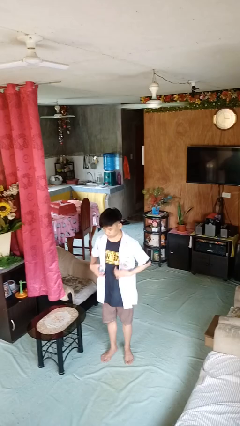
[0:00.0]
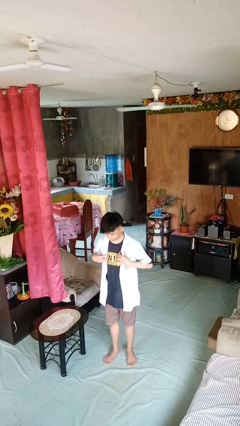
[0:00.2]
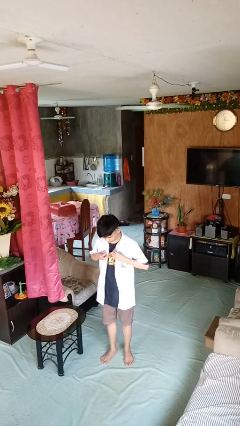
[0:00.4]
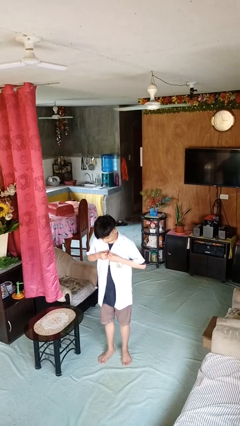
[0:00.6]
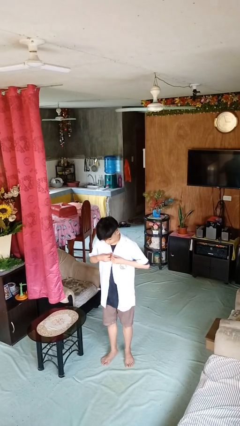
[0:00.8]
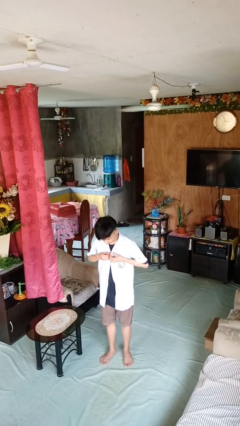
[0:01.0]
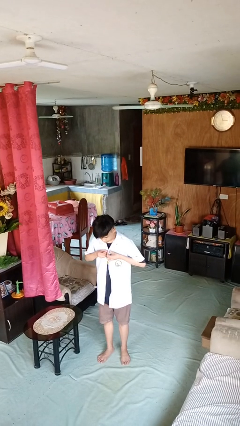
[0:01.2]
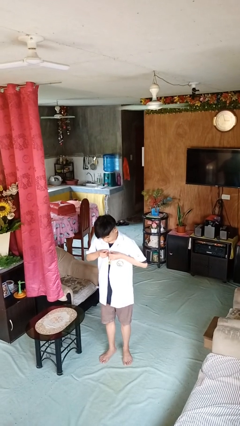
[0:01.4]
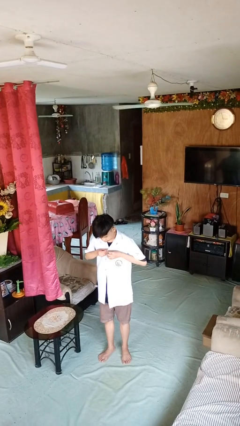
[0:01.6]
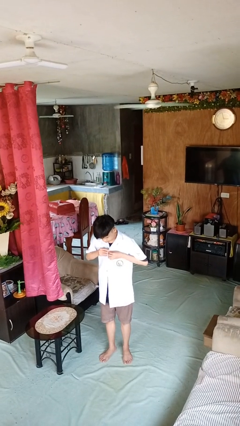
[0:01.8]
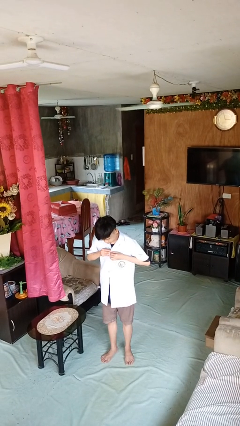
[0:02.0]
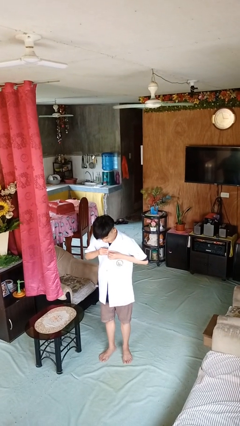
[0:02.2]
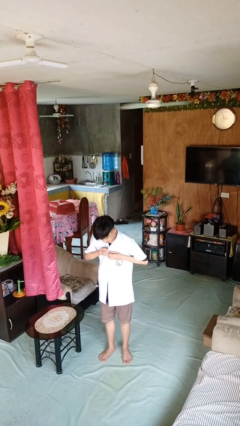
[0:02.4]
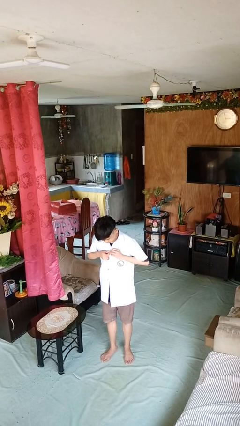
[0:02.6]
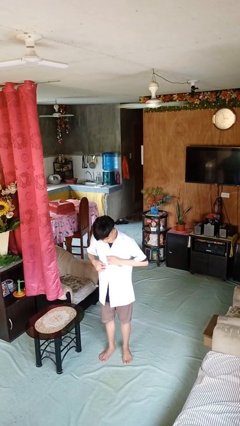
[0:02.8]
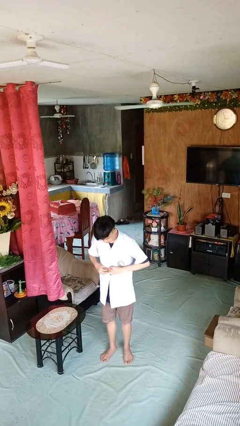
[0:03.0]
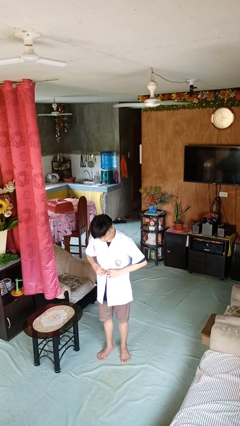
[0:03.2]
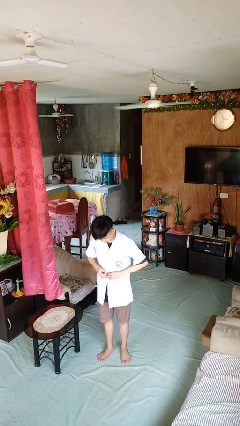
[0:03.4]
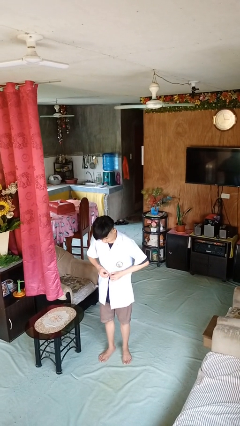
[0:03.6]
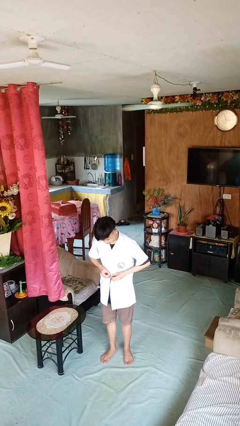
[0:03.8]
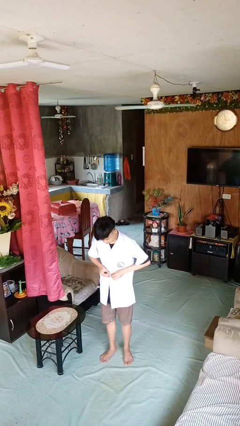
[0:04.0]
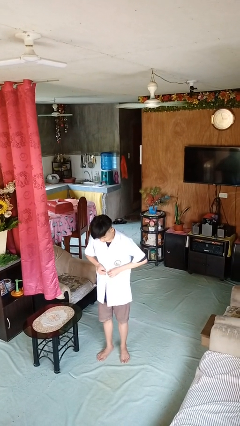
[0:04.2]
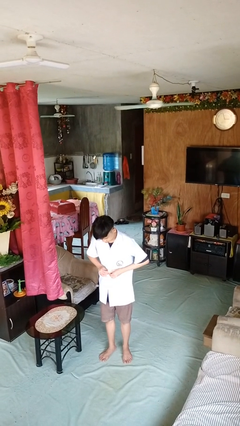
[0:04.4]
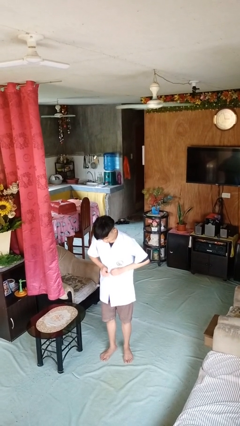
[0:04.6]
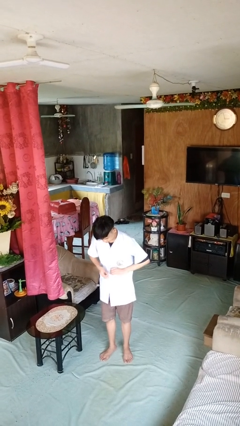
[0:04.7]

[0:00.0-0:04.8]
person buttons shirt

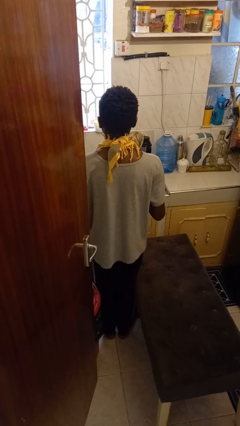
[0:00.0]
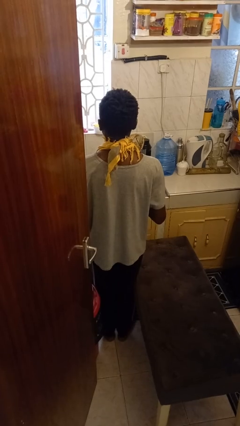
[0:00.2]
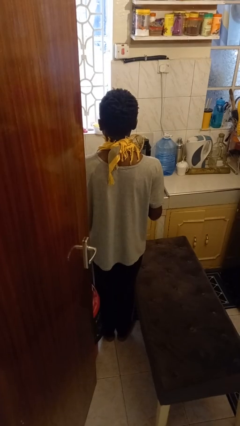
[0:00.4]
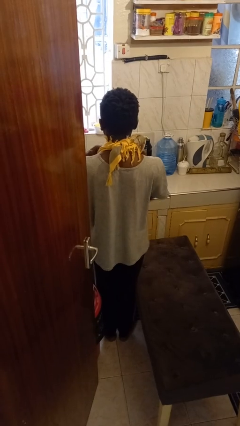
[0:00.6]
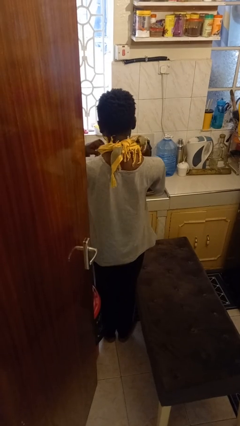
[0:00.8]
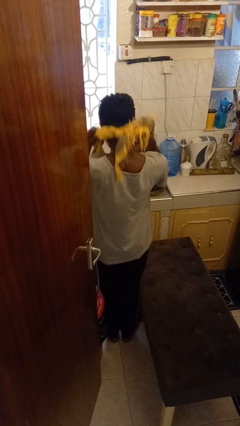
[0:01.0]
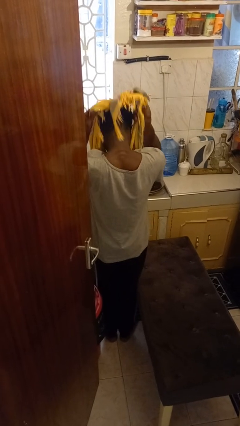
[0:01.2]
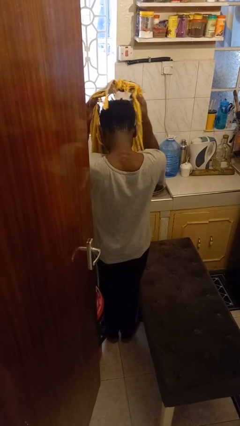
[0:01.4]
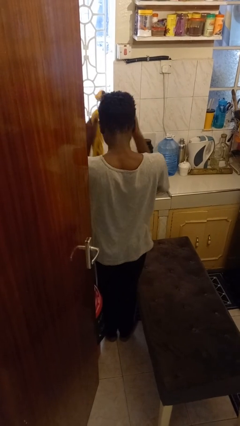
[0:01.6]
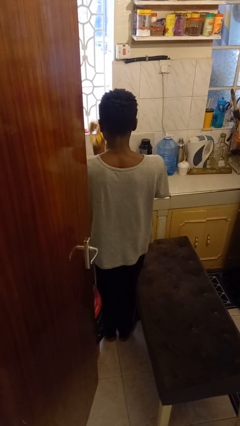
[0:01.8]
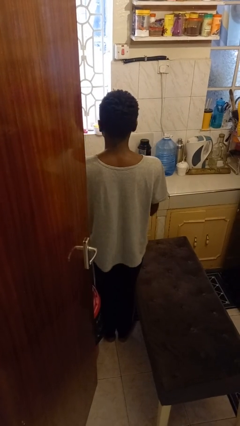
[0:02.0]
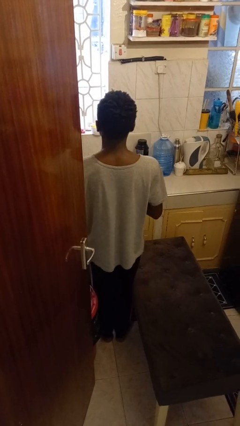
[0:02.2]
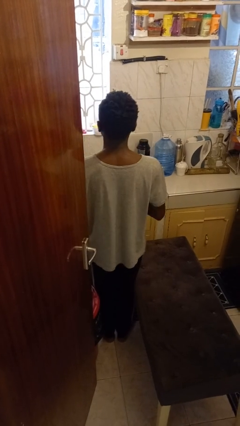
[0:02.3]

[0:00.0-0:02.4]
person takes off apron

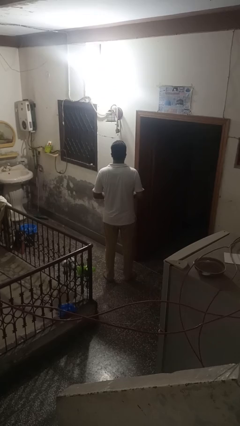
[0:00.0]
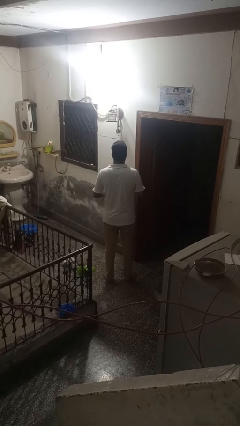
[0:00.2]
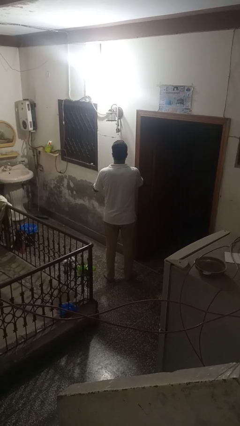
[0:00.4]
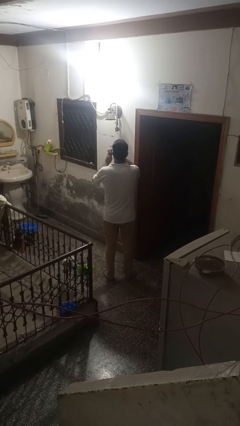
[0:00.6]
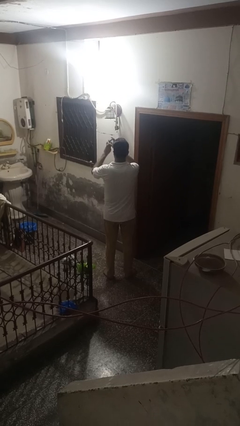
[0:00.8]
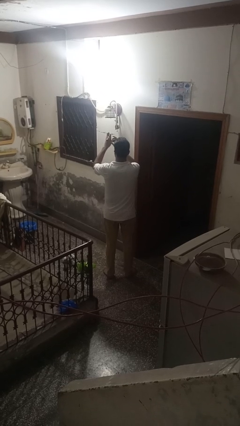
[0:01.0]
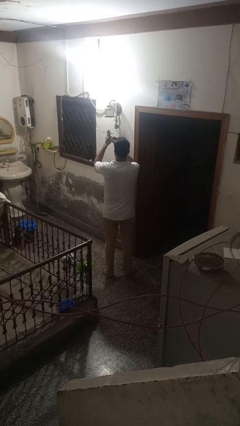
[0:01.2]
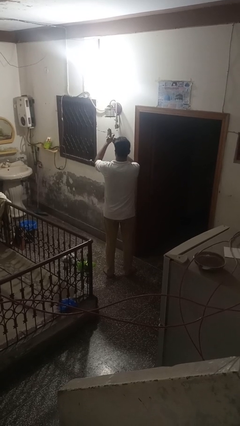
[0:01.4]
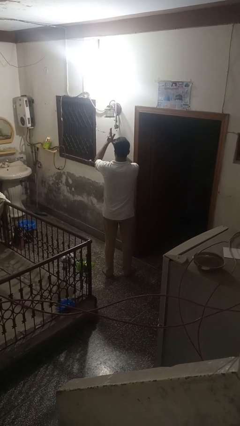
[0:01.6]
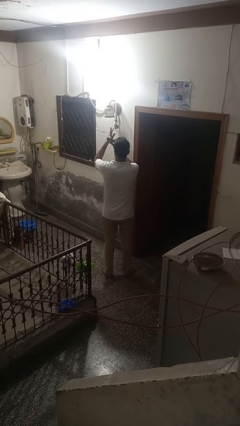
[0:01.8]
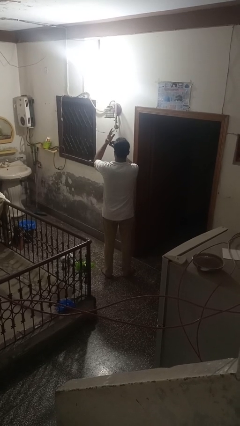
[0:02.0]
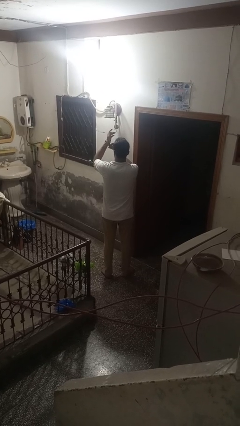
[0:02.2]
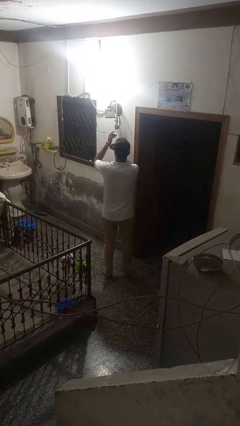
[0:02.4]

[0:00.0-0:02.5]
person puts on wristwatch

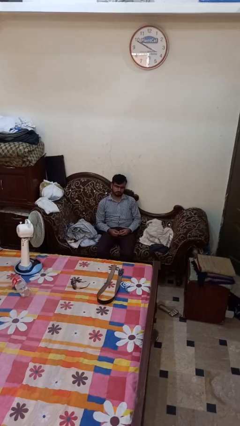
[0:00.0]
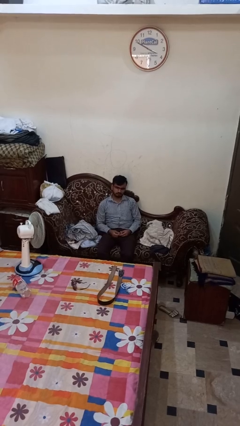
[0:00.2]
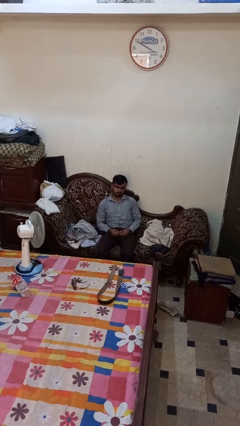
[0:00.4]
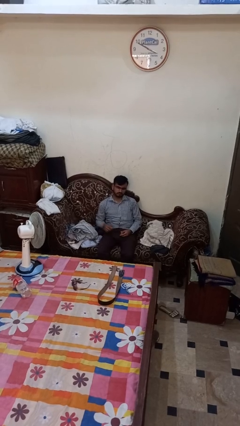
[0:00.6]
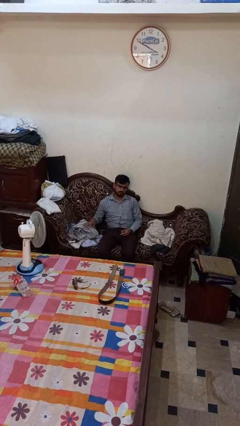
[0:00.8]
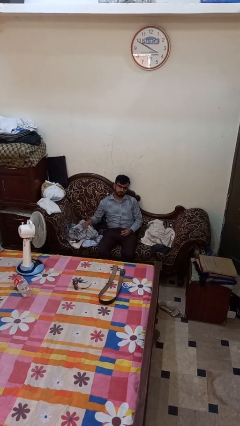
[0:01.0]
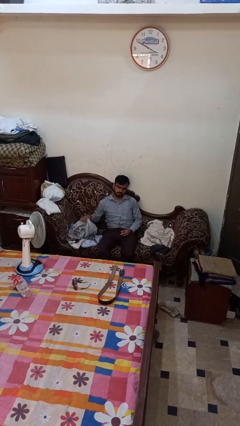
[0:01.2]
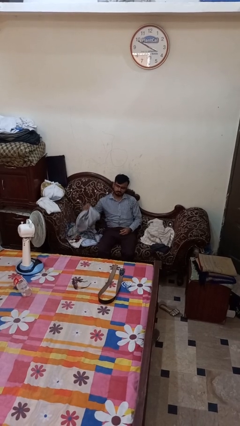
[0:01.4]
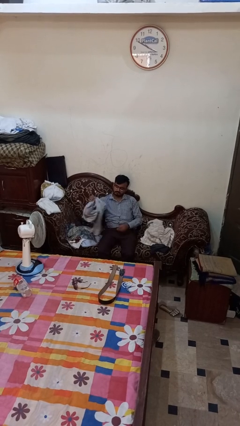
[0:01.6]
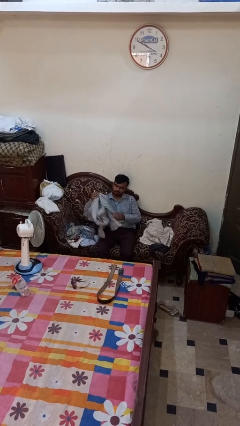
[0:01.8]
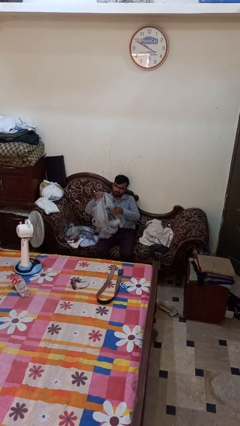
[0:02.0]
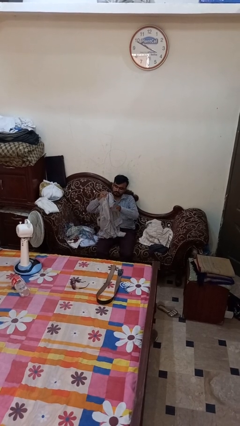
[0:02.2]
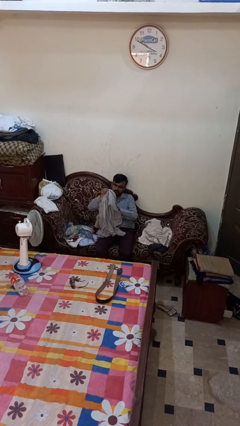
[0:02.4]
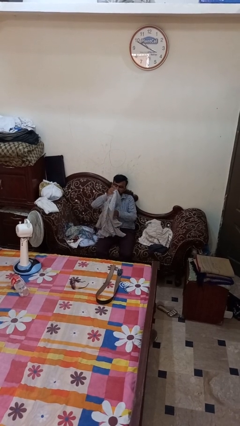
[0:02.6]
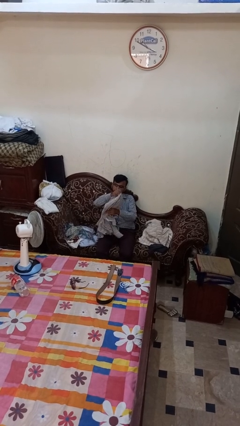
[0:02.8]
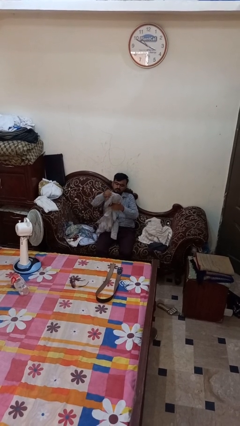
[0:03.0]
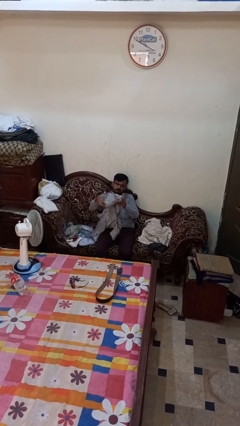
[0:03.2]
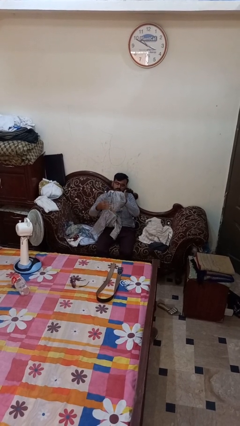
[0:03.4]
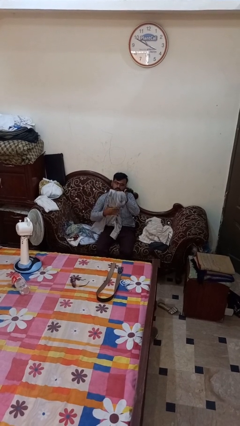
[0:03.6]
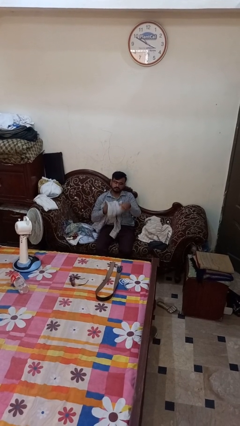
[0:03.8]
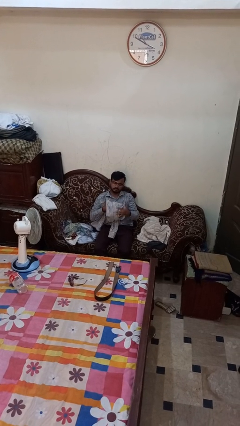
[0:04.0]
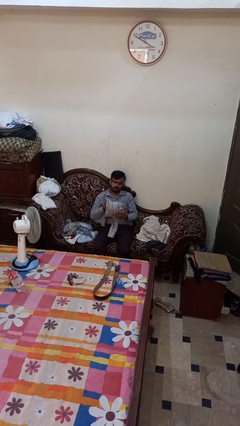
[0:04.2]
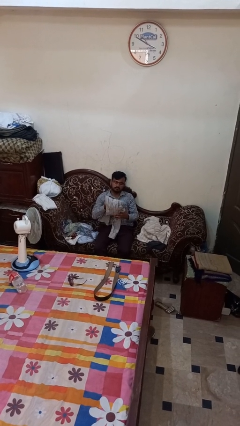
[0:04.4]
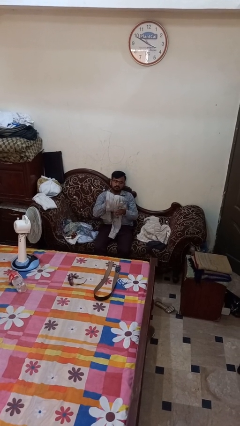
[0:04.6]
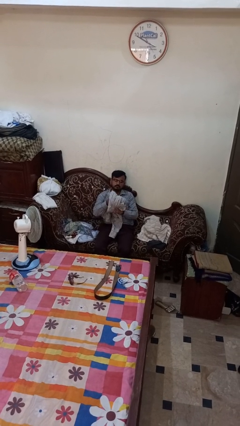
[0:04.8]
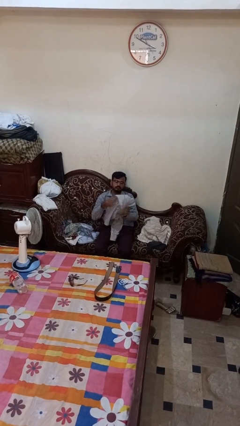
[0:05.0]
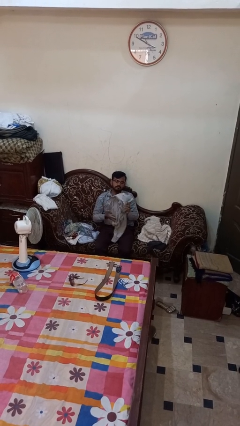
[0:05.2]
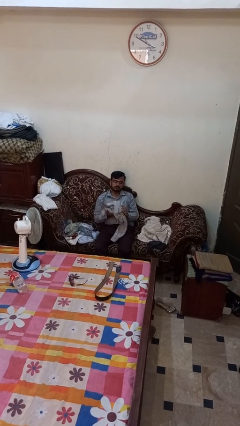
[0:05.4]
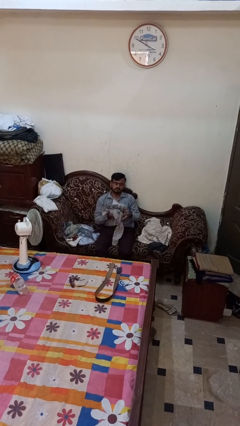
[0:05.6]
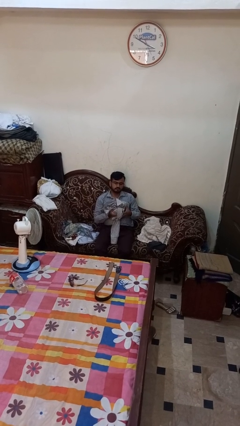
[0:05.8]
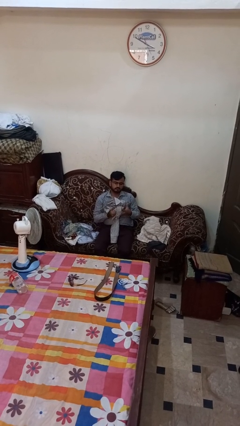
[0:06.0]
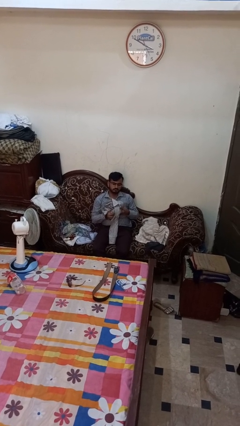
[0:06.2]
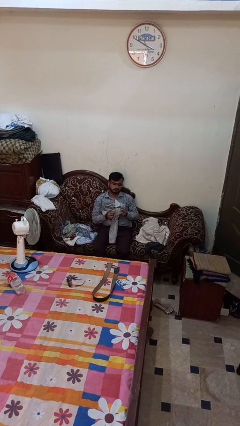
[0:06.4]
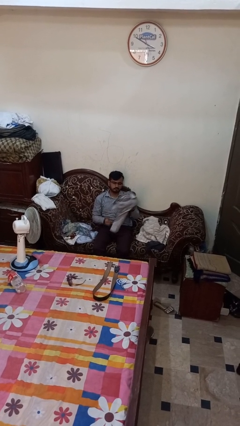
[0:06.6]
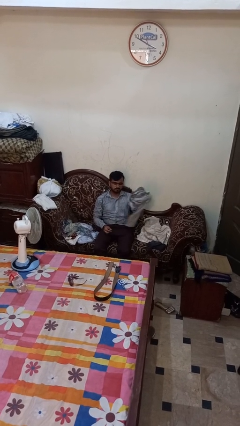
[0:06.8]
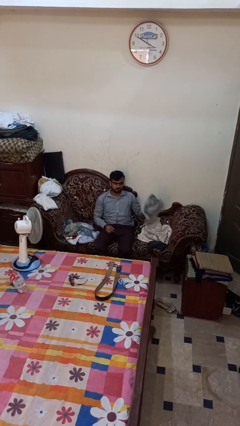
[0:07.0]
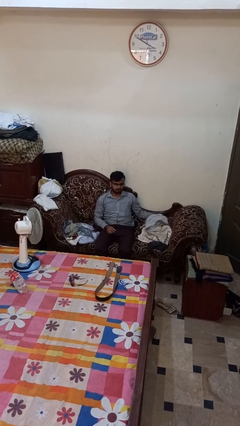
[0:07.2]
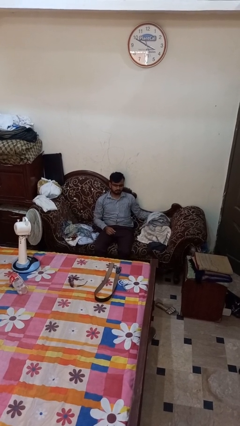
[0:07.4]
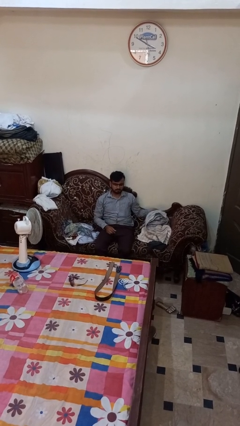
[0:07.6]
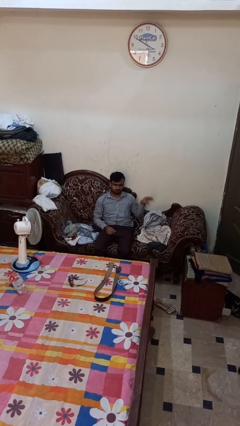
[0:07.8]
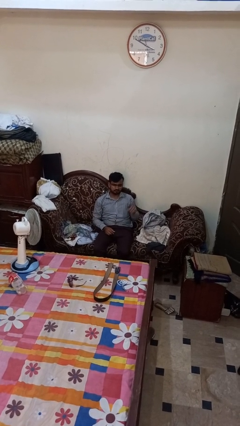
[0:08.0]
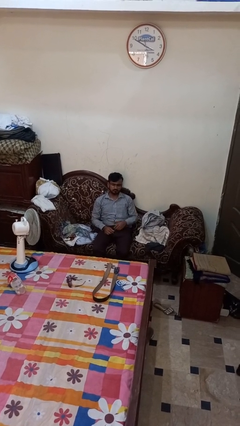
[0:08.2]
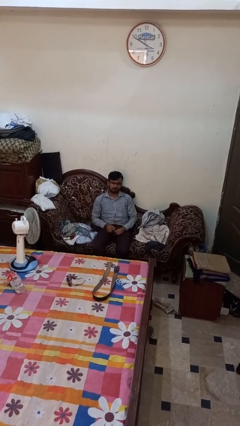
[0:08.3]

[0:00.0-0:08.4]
person folds shirt
